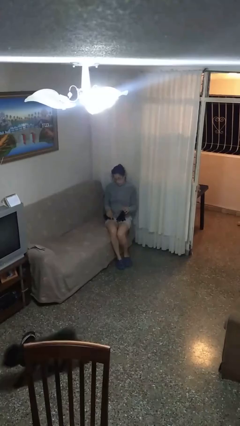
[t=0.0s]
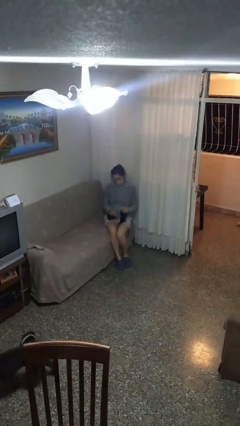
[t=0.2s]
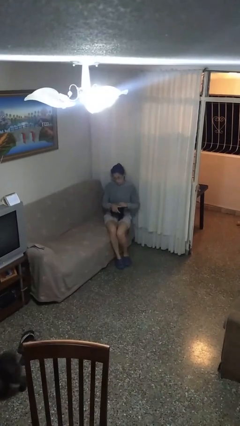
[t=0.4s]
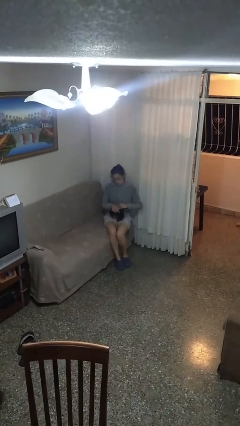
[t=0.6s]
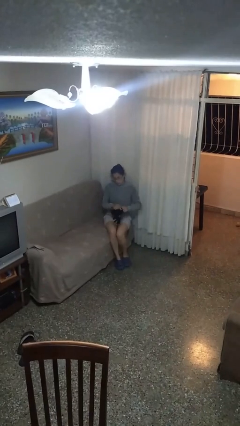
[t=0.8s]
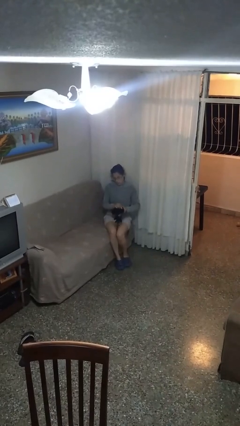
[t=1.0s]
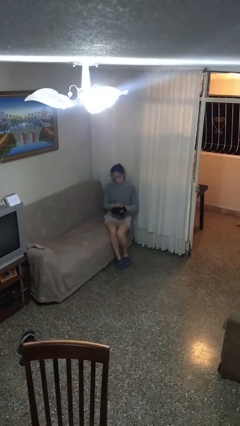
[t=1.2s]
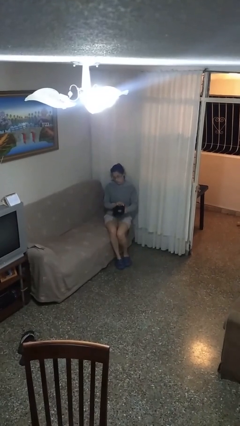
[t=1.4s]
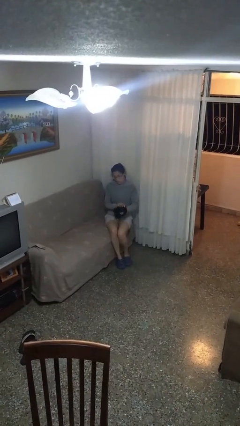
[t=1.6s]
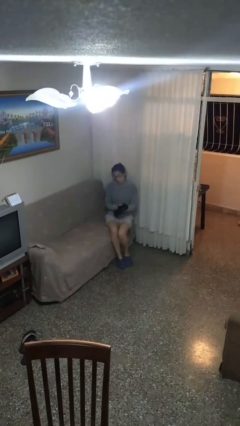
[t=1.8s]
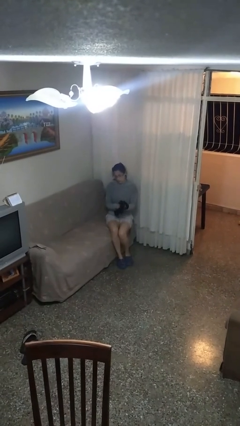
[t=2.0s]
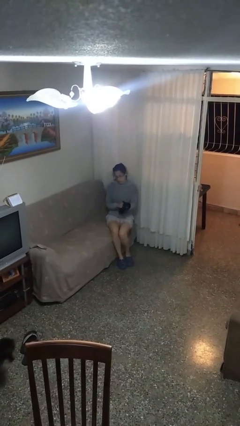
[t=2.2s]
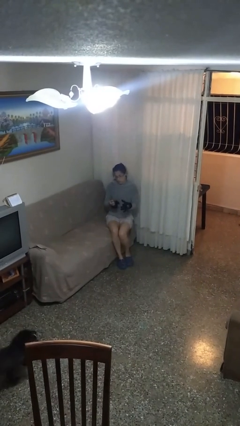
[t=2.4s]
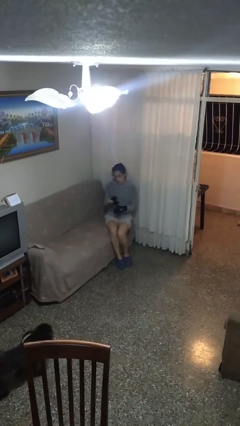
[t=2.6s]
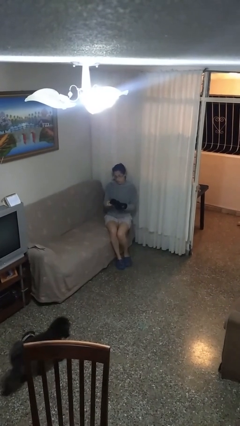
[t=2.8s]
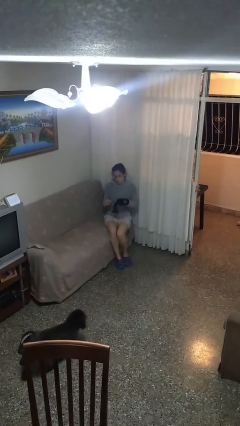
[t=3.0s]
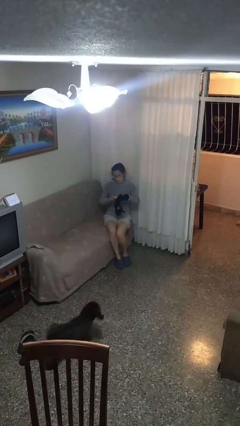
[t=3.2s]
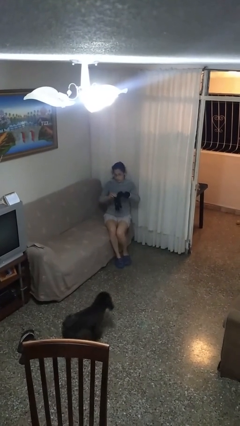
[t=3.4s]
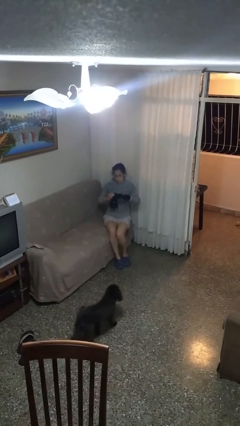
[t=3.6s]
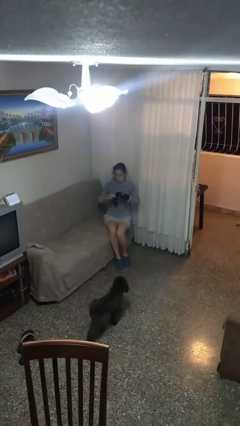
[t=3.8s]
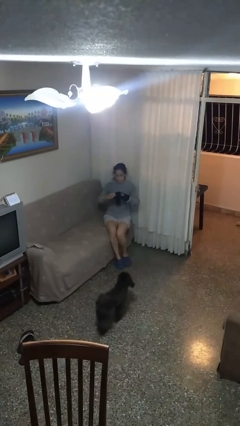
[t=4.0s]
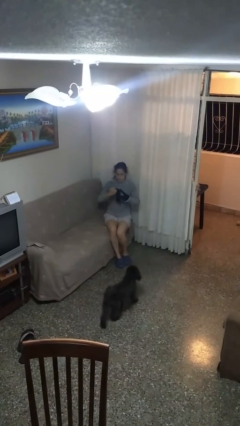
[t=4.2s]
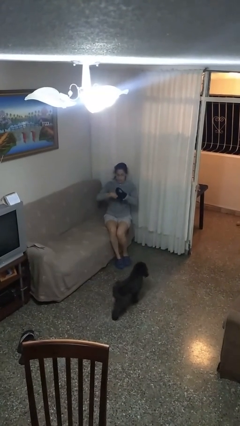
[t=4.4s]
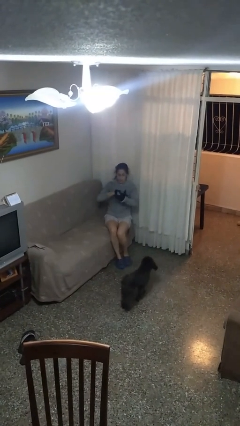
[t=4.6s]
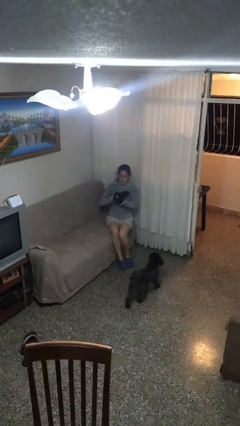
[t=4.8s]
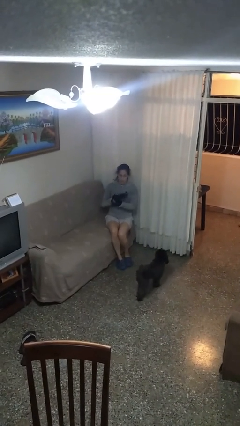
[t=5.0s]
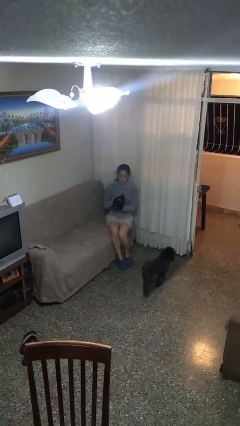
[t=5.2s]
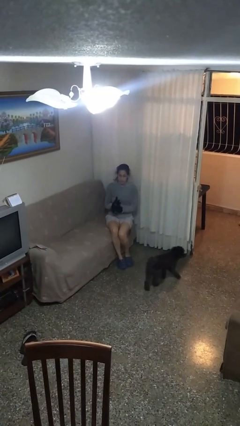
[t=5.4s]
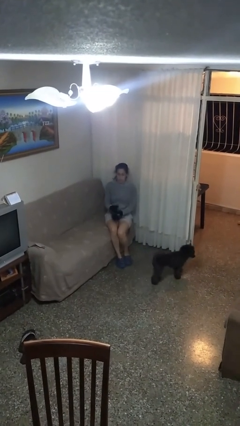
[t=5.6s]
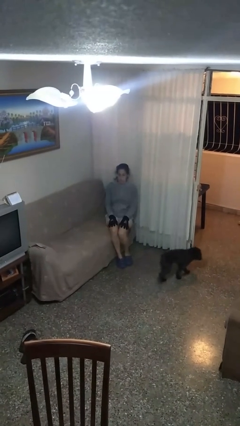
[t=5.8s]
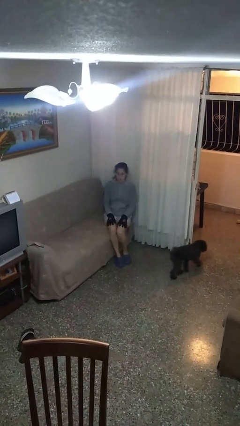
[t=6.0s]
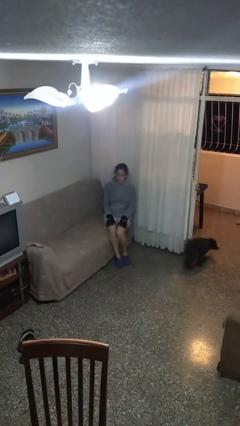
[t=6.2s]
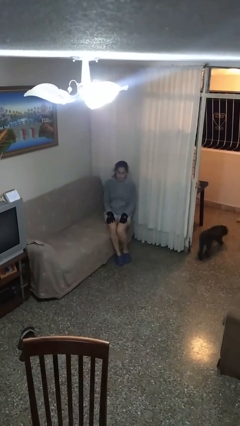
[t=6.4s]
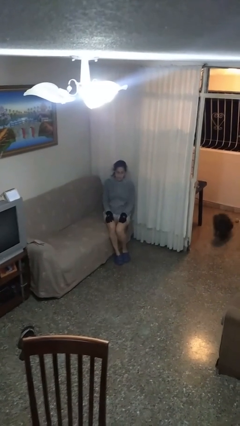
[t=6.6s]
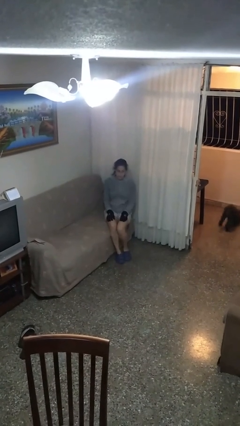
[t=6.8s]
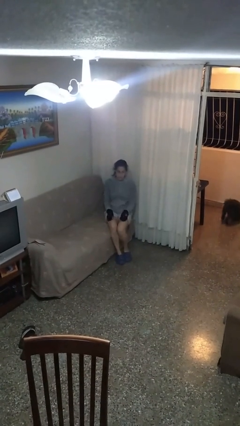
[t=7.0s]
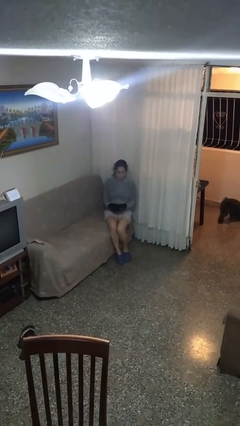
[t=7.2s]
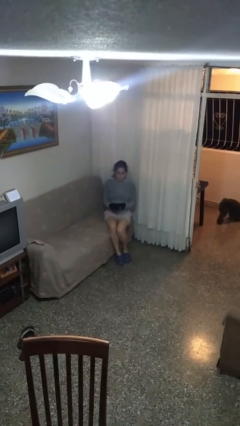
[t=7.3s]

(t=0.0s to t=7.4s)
person puts on gloves

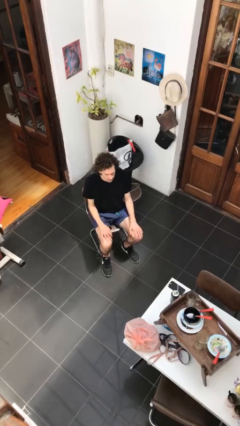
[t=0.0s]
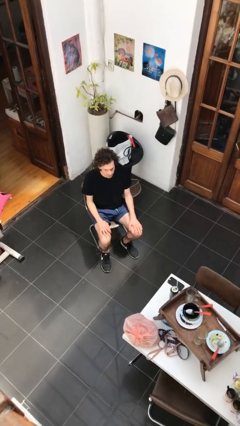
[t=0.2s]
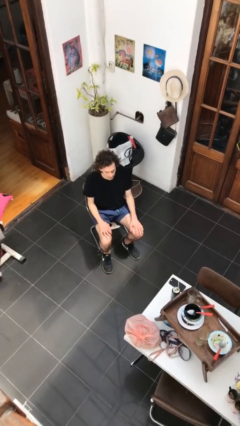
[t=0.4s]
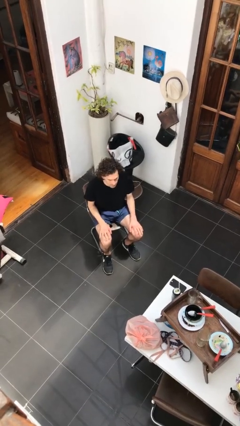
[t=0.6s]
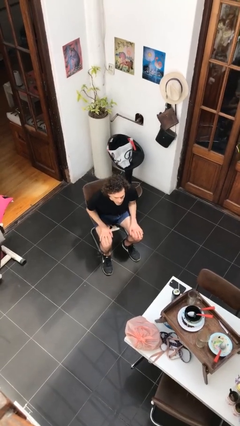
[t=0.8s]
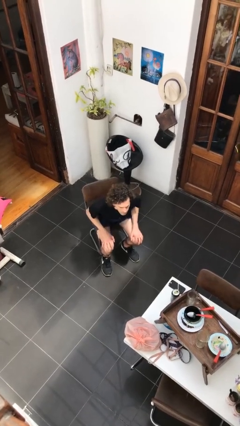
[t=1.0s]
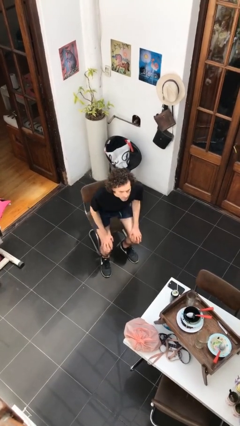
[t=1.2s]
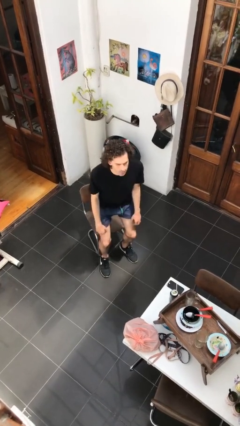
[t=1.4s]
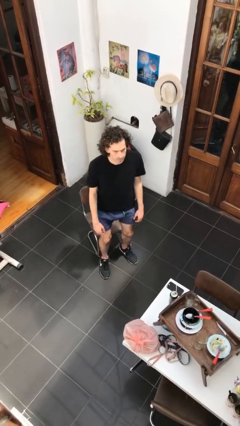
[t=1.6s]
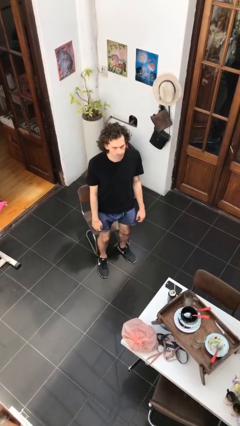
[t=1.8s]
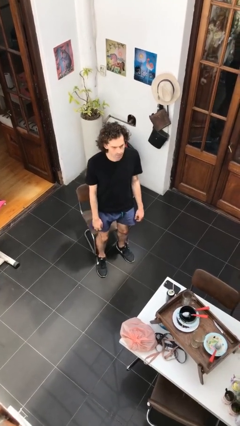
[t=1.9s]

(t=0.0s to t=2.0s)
person stands up

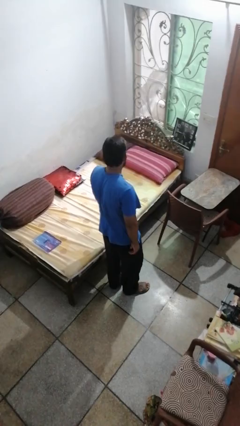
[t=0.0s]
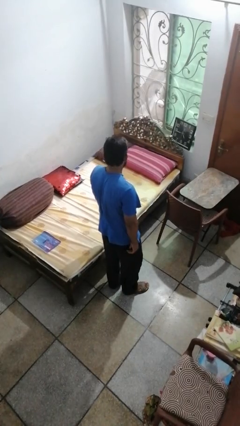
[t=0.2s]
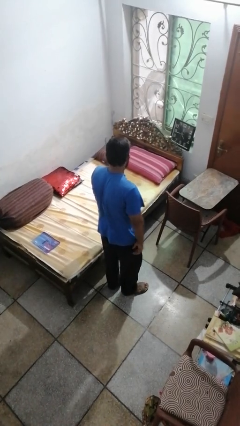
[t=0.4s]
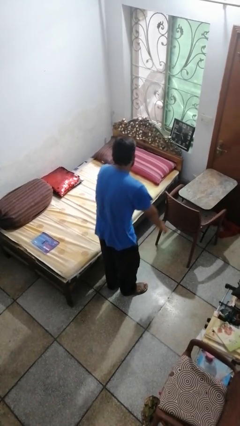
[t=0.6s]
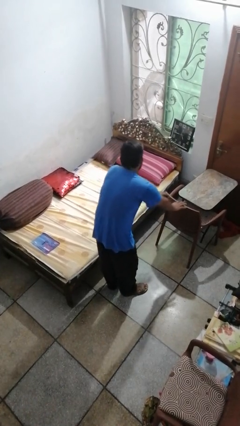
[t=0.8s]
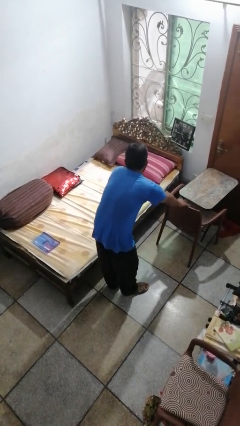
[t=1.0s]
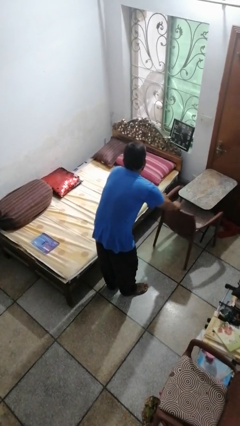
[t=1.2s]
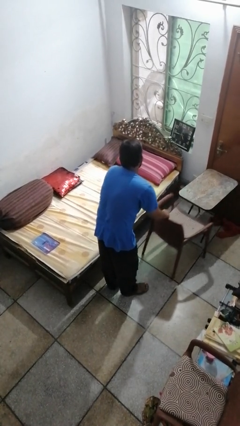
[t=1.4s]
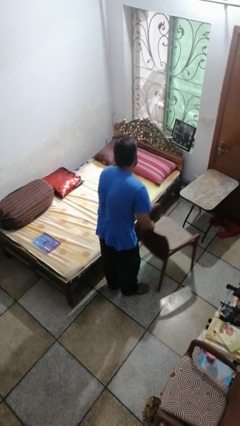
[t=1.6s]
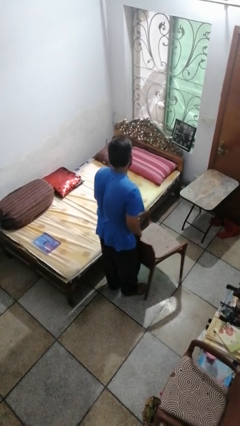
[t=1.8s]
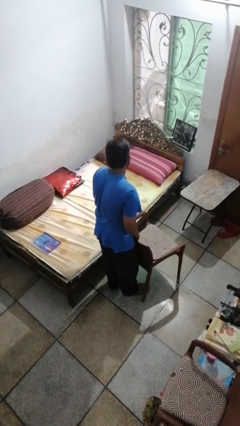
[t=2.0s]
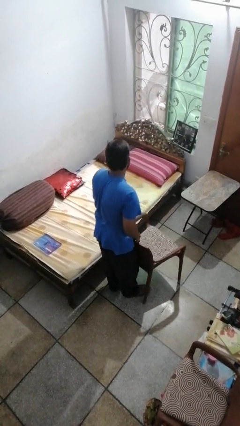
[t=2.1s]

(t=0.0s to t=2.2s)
person pulls out chair

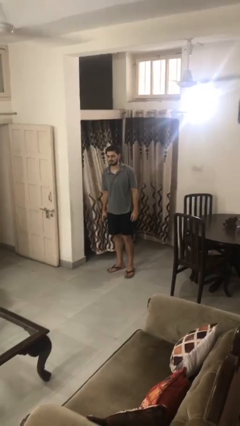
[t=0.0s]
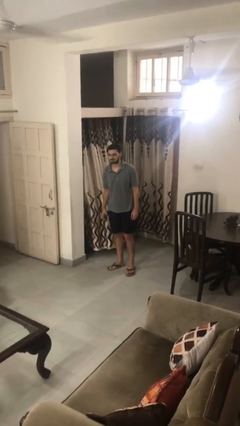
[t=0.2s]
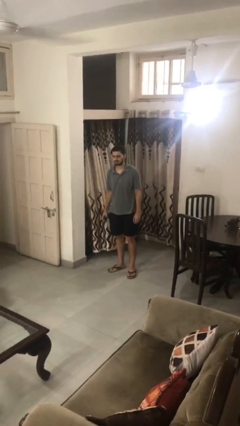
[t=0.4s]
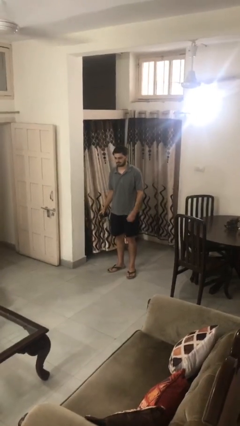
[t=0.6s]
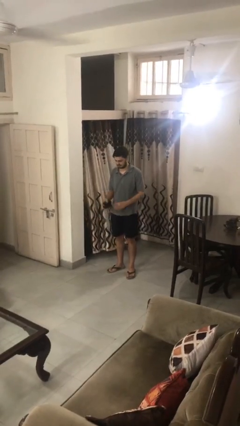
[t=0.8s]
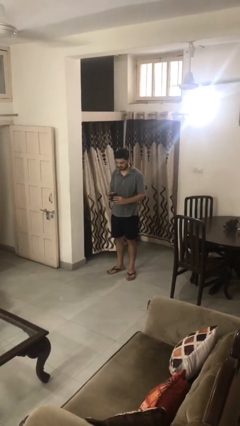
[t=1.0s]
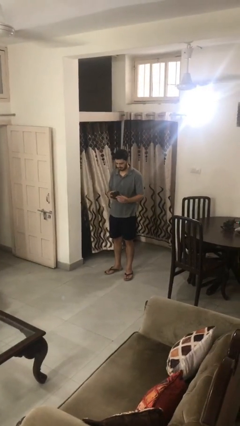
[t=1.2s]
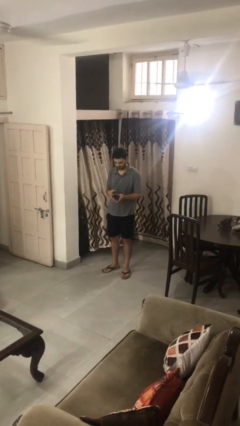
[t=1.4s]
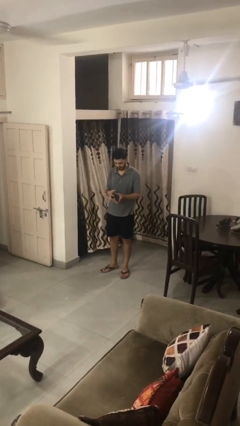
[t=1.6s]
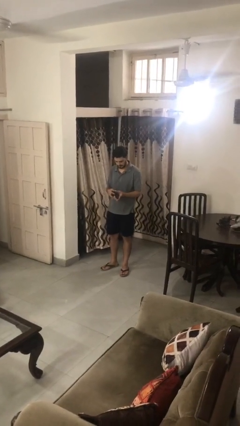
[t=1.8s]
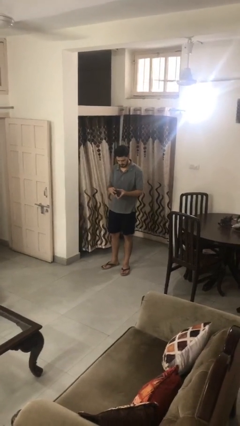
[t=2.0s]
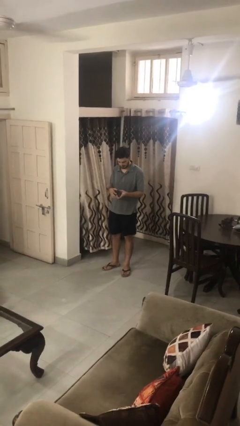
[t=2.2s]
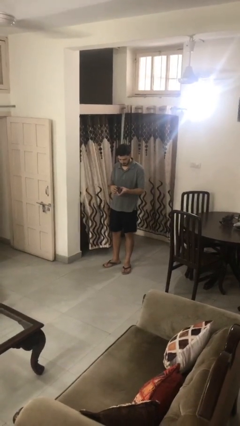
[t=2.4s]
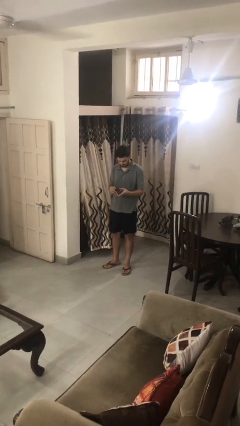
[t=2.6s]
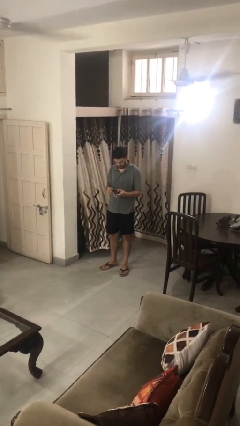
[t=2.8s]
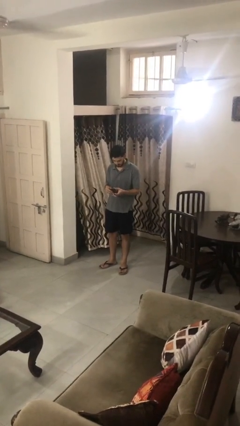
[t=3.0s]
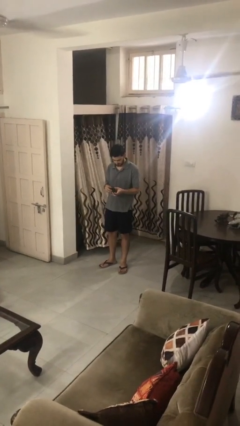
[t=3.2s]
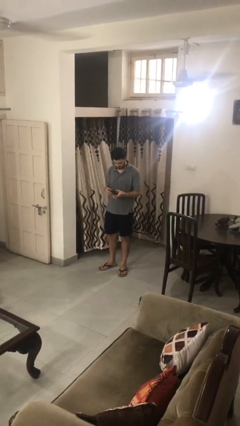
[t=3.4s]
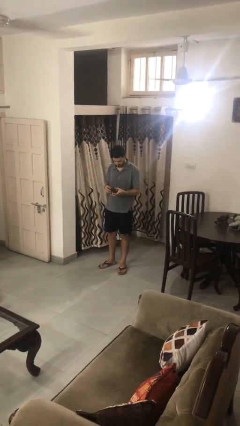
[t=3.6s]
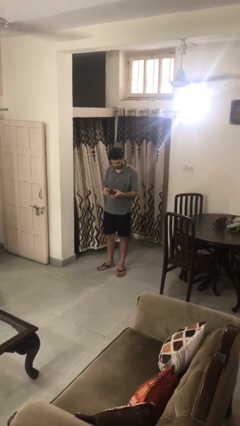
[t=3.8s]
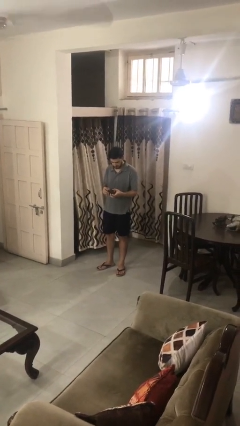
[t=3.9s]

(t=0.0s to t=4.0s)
person searches in purse

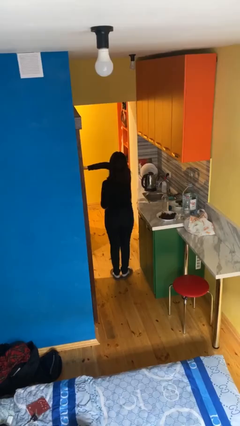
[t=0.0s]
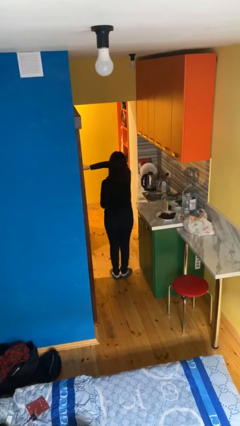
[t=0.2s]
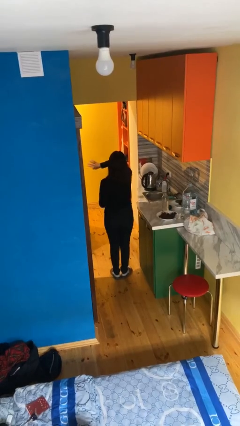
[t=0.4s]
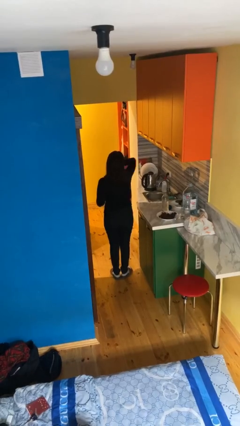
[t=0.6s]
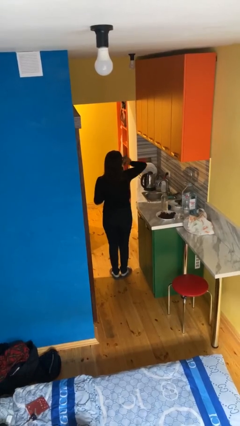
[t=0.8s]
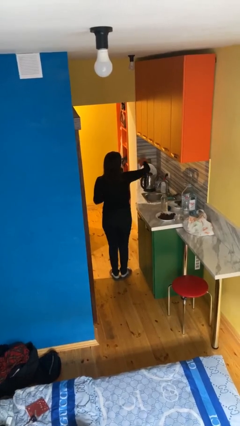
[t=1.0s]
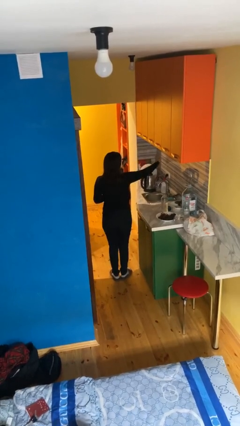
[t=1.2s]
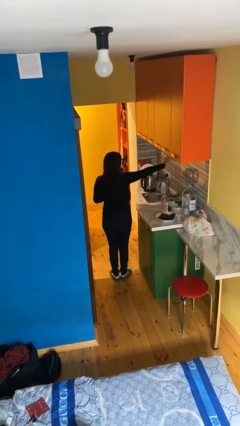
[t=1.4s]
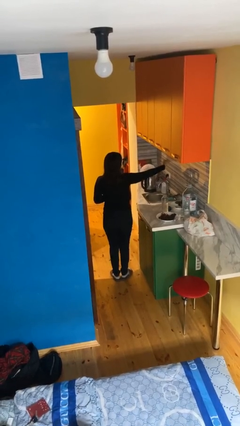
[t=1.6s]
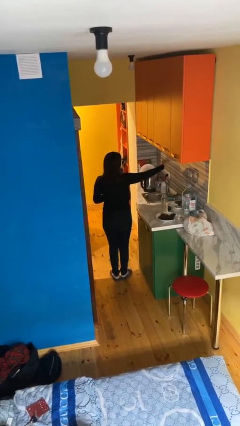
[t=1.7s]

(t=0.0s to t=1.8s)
person gestures swipe right
